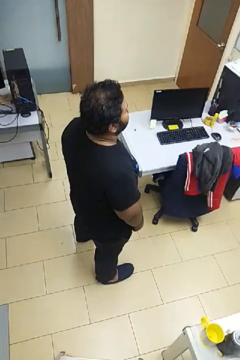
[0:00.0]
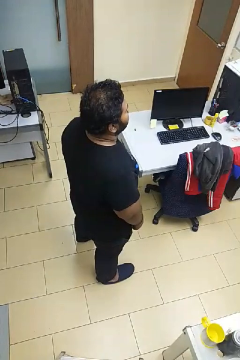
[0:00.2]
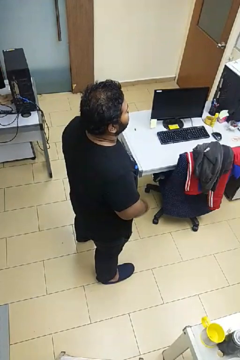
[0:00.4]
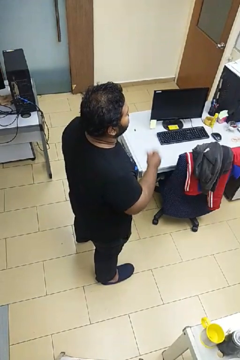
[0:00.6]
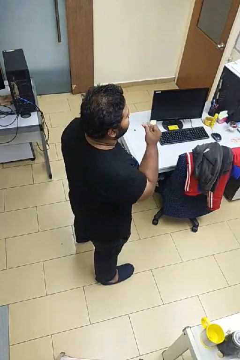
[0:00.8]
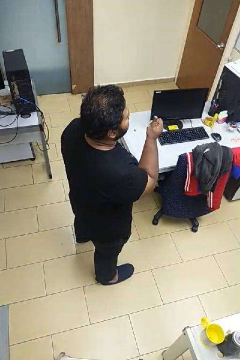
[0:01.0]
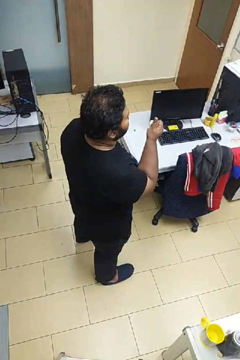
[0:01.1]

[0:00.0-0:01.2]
person snaps fingers

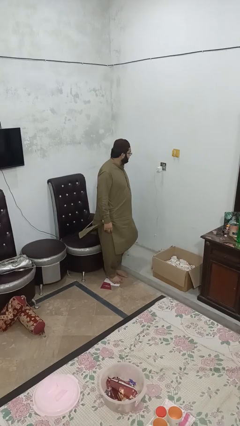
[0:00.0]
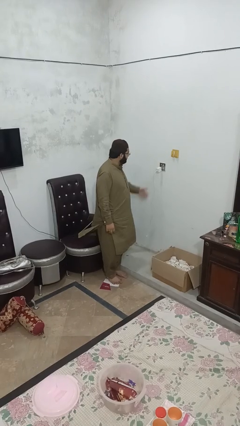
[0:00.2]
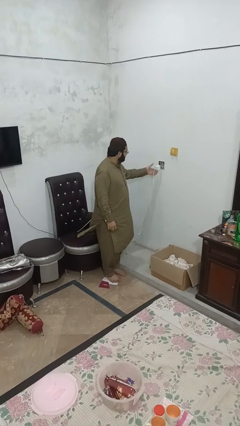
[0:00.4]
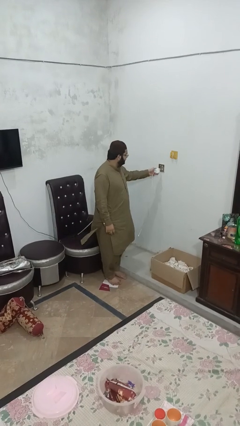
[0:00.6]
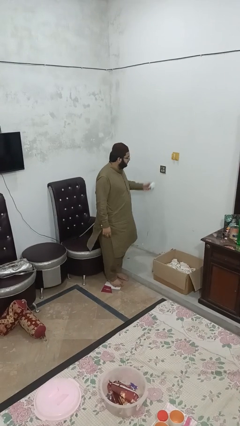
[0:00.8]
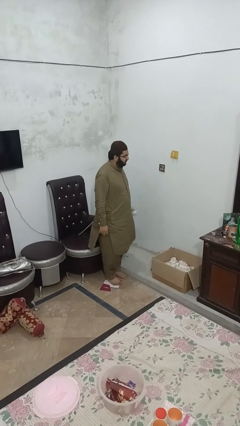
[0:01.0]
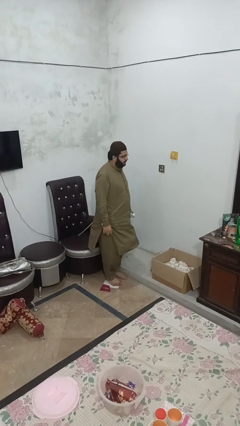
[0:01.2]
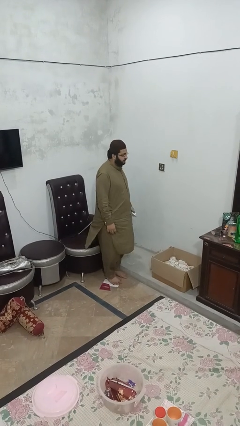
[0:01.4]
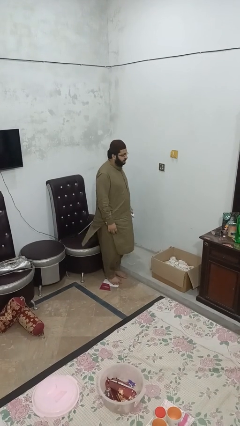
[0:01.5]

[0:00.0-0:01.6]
person unplugs from electrical socket

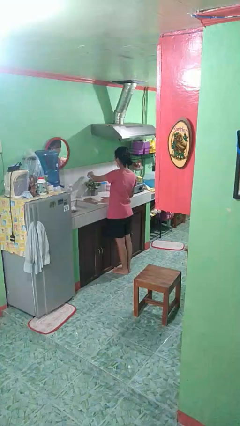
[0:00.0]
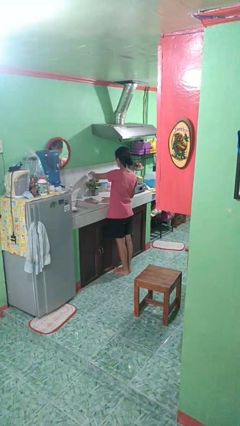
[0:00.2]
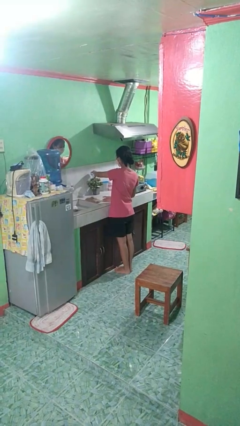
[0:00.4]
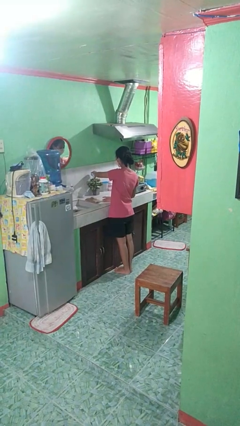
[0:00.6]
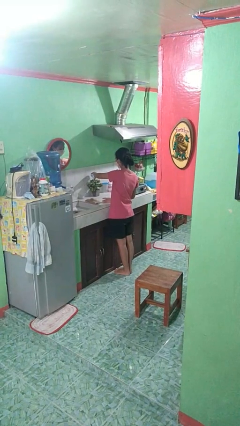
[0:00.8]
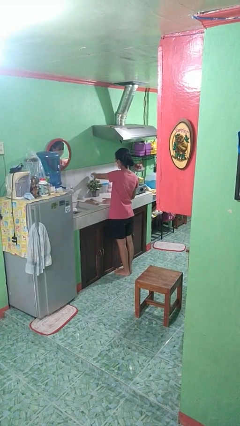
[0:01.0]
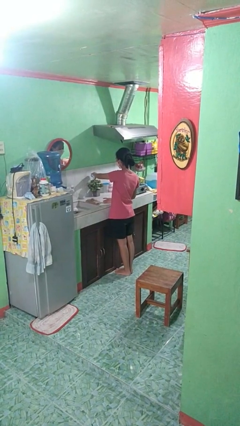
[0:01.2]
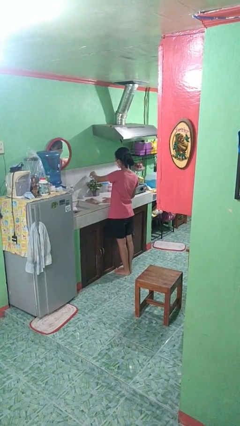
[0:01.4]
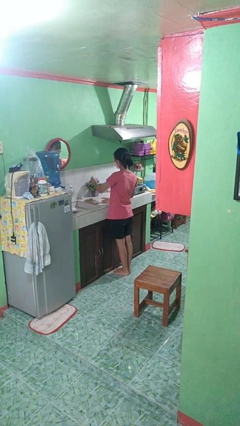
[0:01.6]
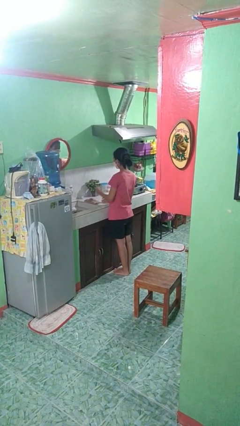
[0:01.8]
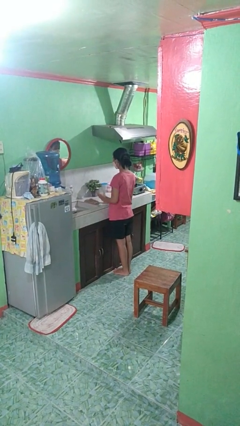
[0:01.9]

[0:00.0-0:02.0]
person waters houseplant

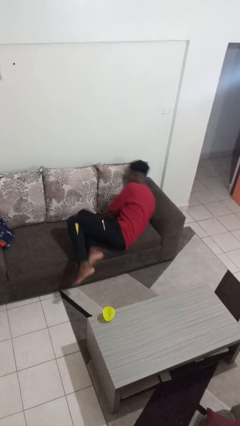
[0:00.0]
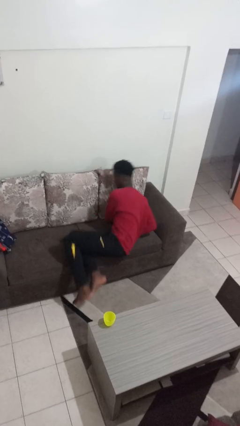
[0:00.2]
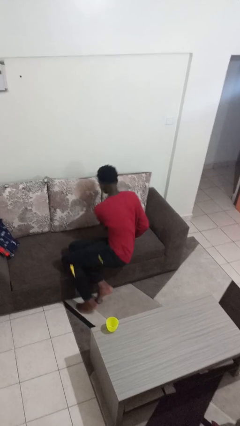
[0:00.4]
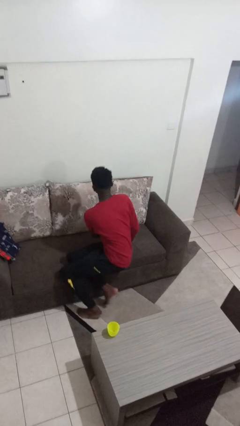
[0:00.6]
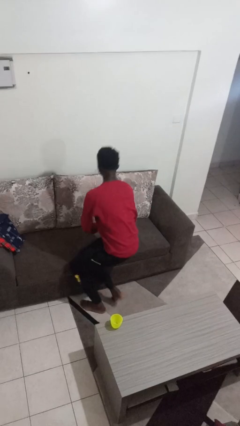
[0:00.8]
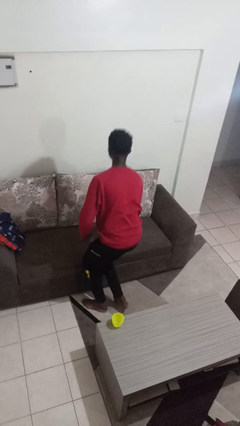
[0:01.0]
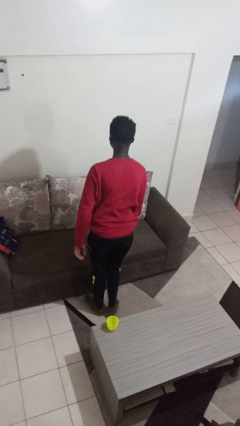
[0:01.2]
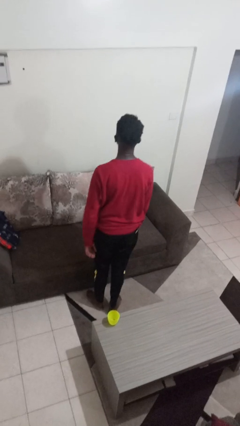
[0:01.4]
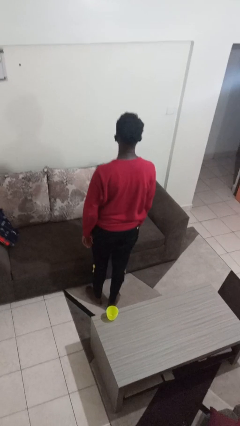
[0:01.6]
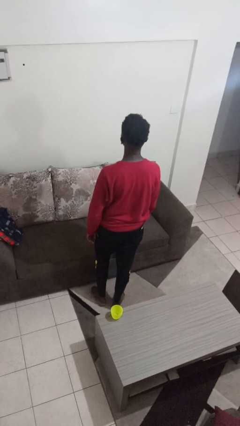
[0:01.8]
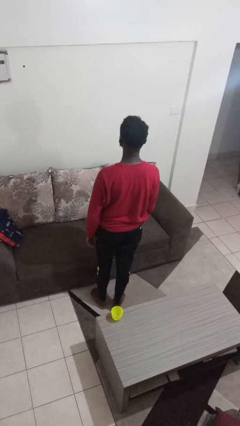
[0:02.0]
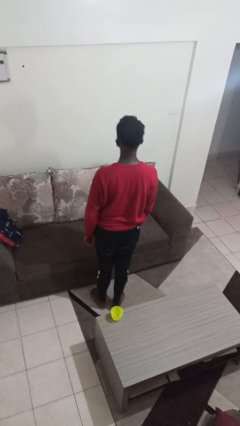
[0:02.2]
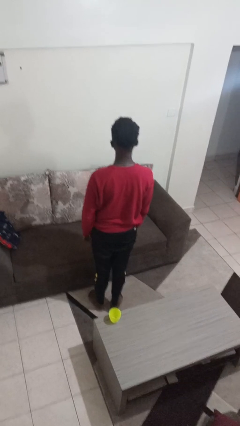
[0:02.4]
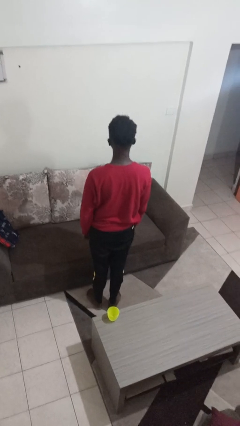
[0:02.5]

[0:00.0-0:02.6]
person stands up

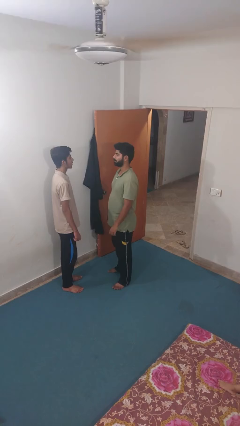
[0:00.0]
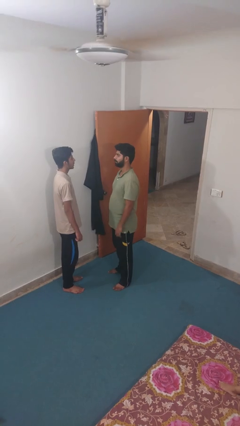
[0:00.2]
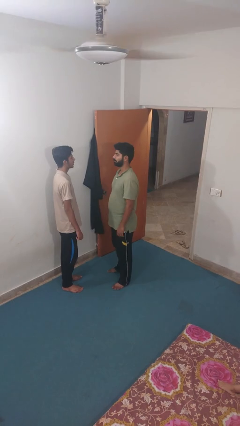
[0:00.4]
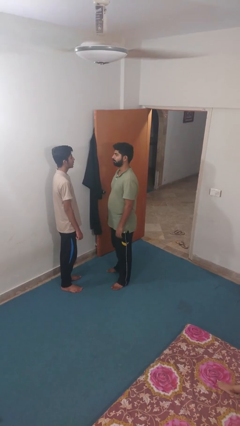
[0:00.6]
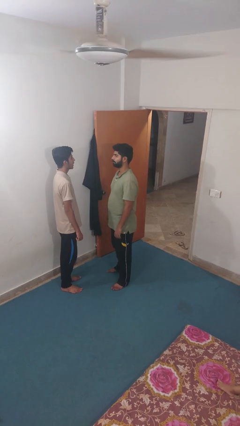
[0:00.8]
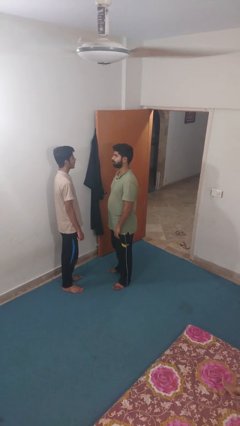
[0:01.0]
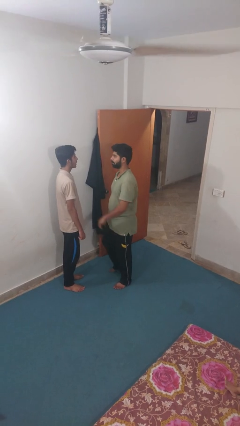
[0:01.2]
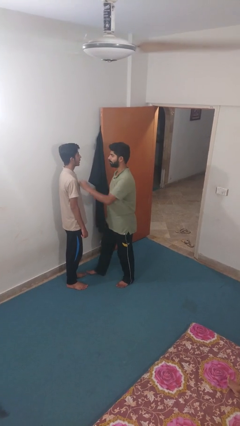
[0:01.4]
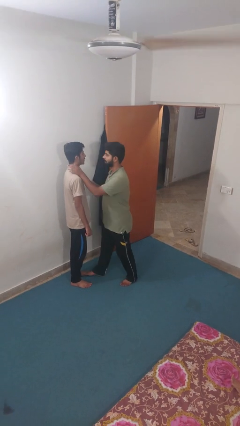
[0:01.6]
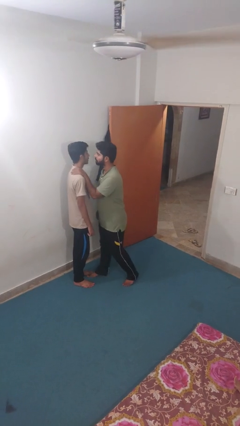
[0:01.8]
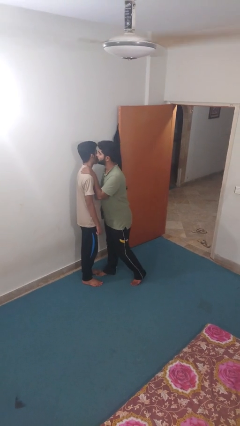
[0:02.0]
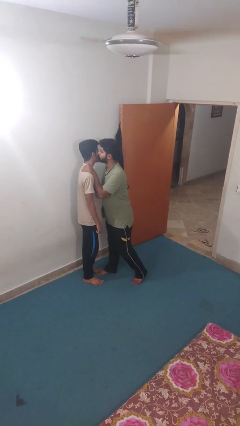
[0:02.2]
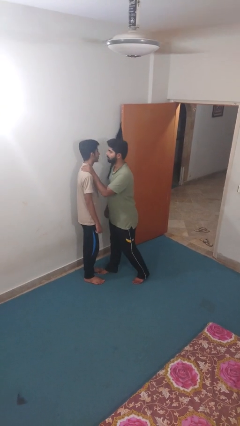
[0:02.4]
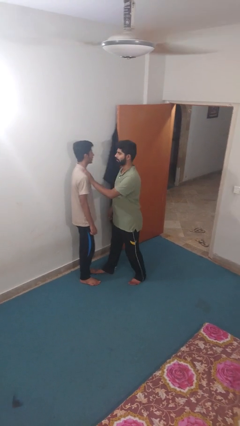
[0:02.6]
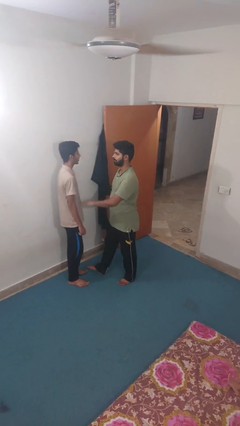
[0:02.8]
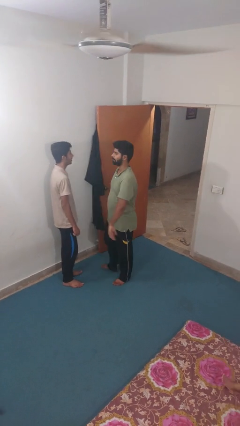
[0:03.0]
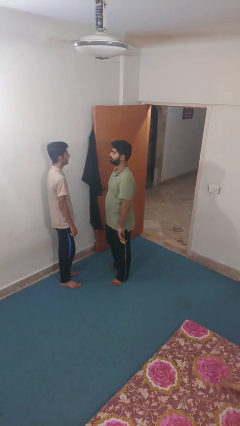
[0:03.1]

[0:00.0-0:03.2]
person kisses cheek of person

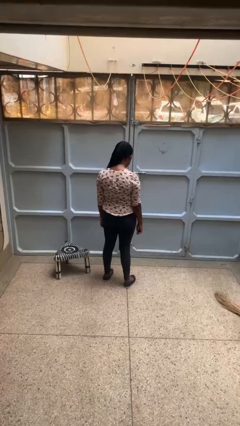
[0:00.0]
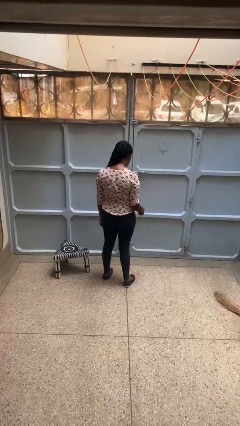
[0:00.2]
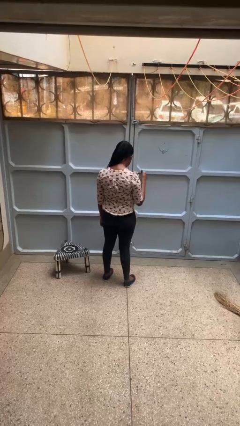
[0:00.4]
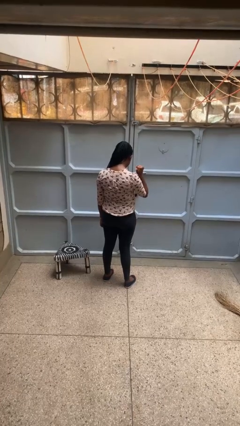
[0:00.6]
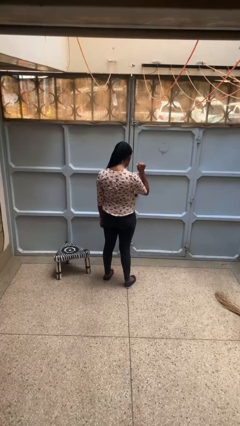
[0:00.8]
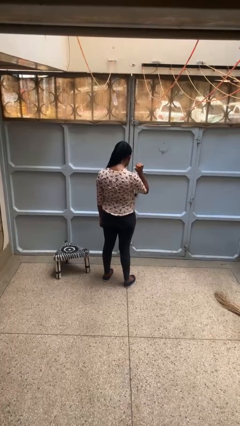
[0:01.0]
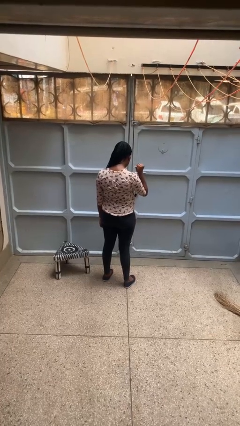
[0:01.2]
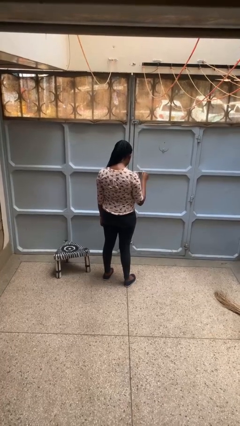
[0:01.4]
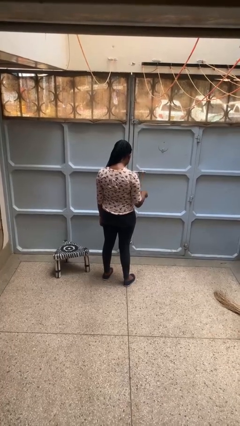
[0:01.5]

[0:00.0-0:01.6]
person gestures behind me

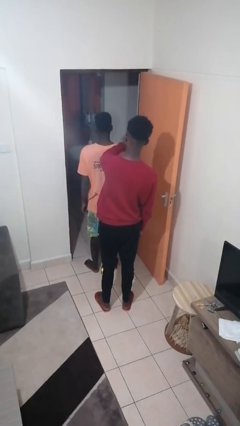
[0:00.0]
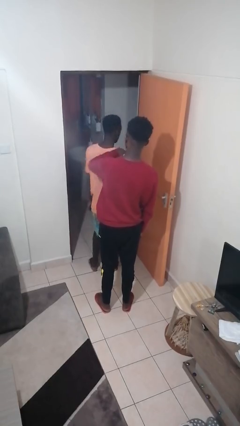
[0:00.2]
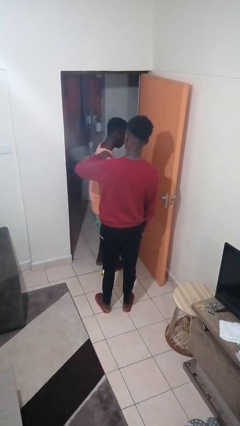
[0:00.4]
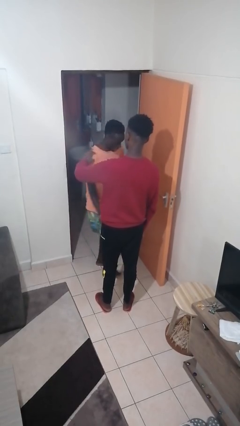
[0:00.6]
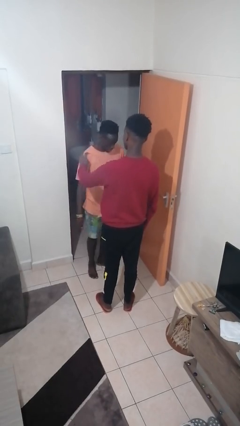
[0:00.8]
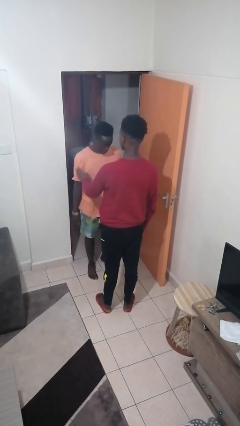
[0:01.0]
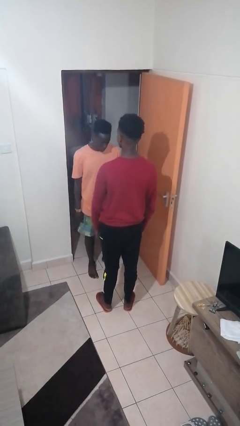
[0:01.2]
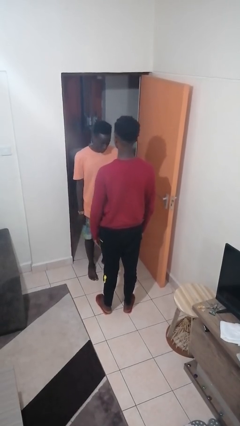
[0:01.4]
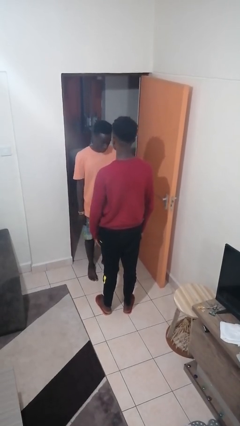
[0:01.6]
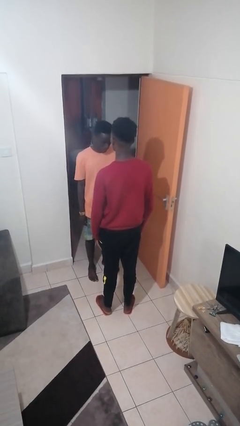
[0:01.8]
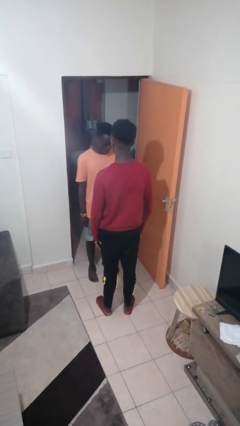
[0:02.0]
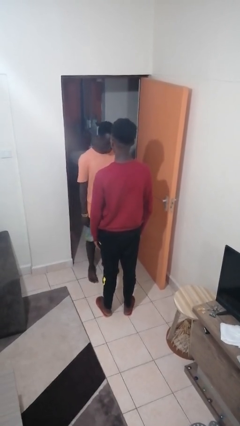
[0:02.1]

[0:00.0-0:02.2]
person spins person around

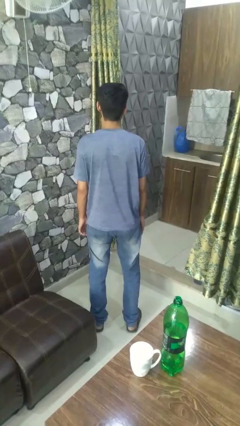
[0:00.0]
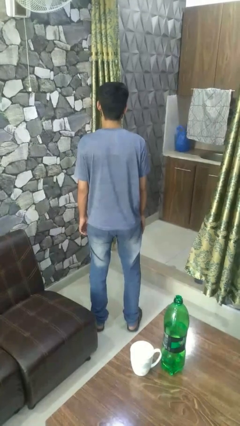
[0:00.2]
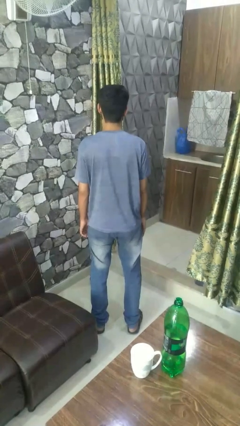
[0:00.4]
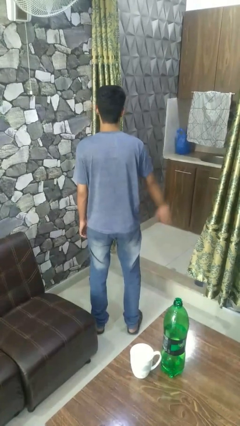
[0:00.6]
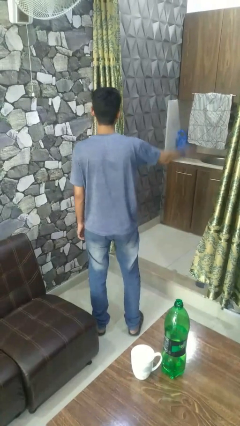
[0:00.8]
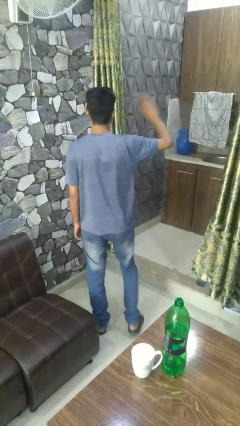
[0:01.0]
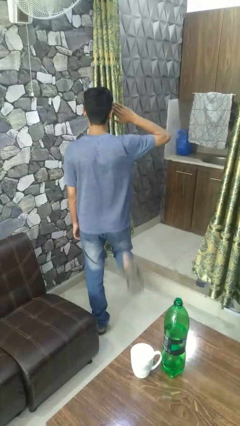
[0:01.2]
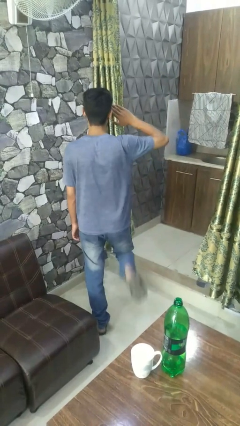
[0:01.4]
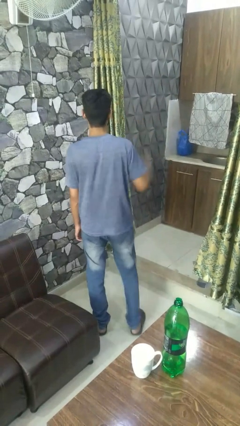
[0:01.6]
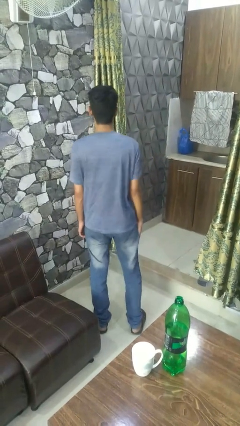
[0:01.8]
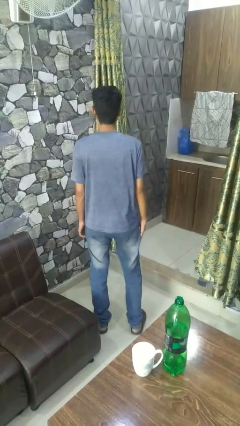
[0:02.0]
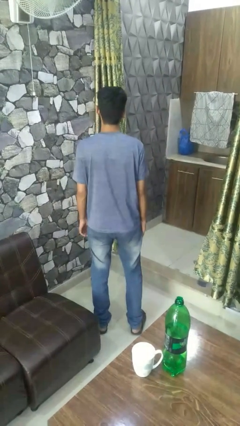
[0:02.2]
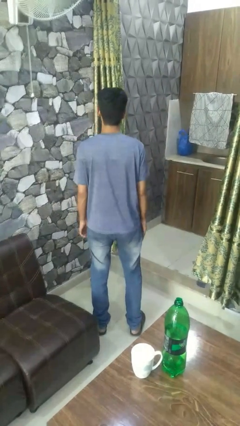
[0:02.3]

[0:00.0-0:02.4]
person salutes

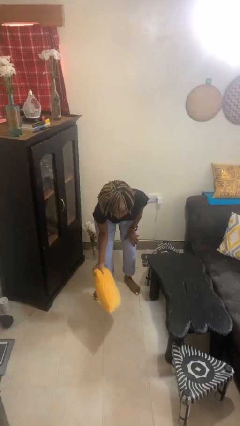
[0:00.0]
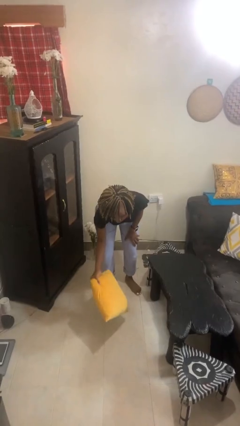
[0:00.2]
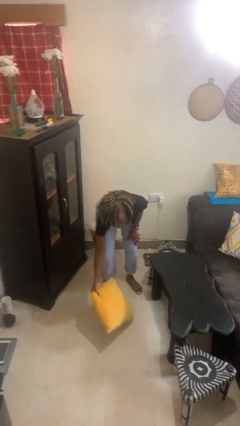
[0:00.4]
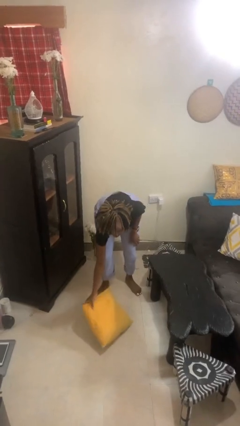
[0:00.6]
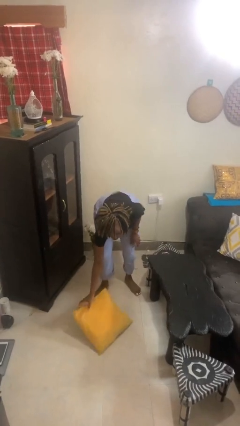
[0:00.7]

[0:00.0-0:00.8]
person catches dropped object
